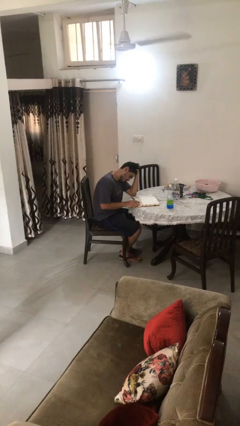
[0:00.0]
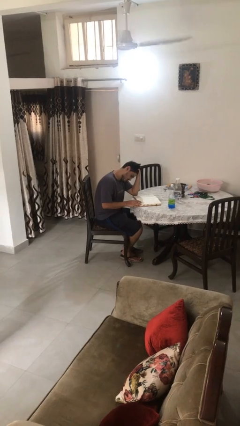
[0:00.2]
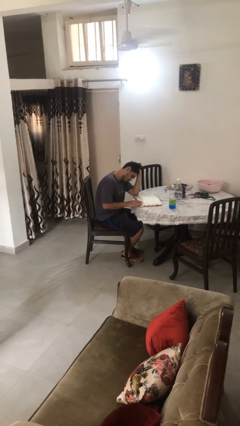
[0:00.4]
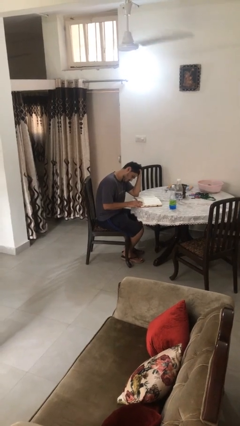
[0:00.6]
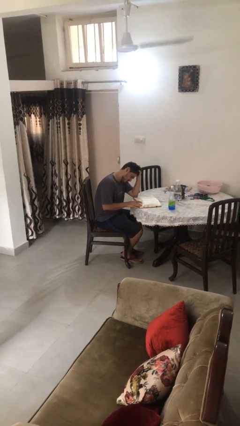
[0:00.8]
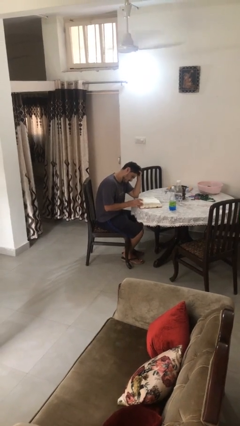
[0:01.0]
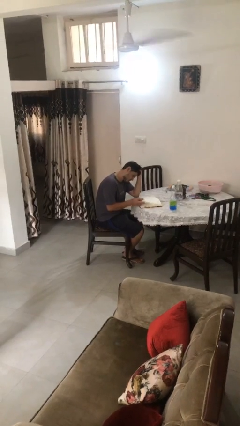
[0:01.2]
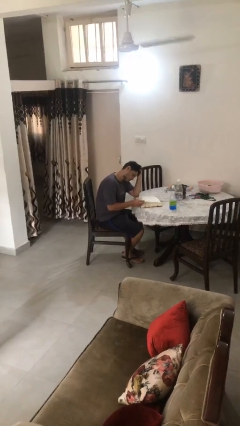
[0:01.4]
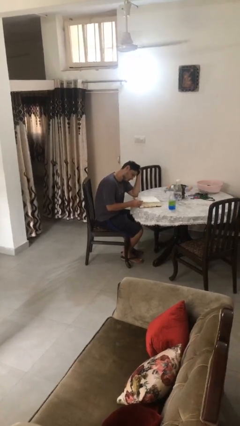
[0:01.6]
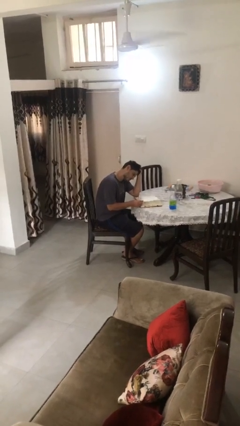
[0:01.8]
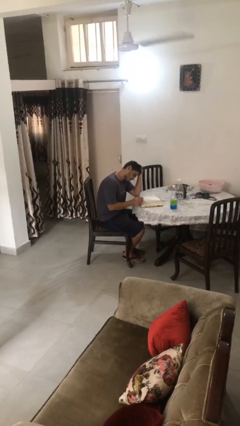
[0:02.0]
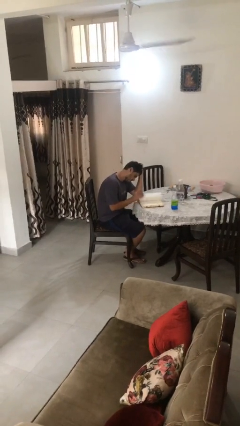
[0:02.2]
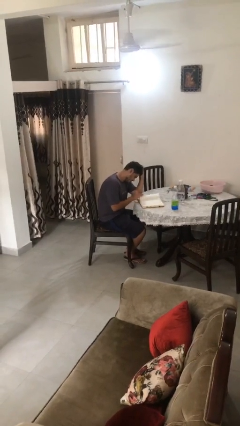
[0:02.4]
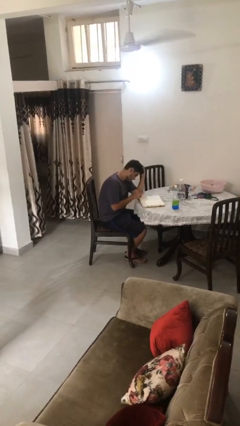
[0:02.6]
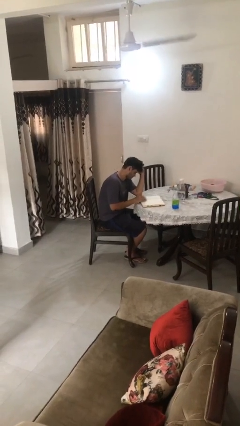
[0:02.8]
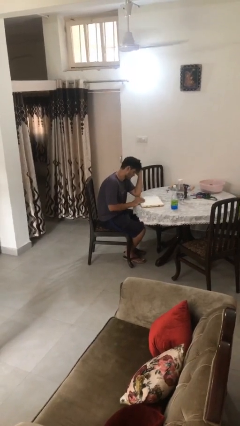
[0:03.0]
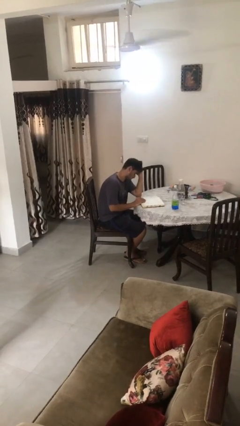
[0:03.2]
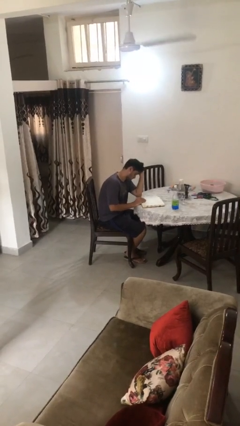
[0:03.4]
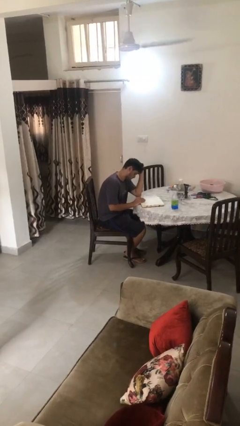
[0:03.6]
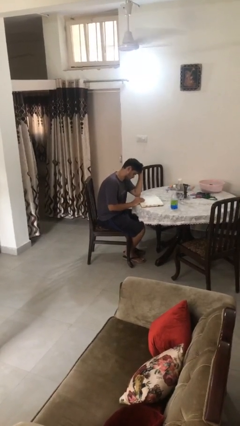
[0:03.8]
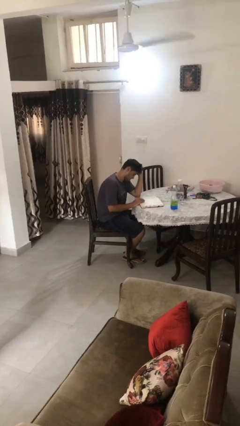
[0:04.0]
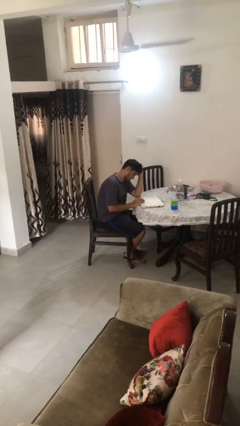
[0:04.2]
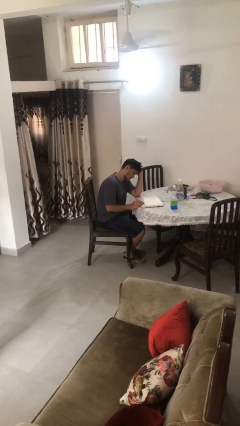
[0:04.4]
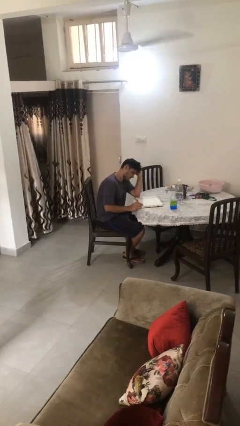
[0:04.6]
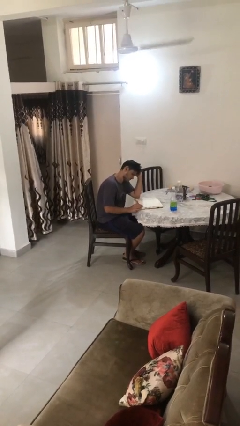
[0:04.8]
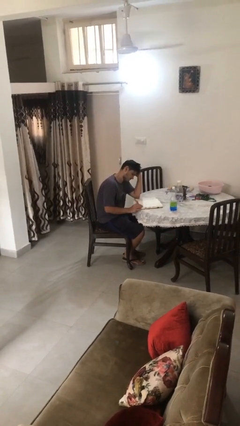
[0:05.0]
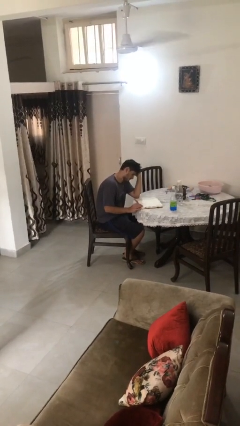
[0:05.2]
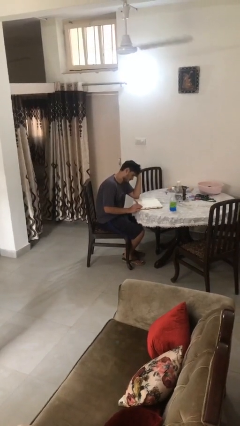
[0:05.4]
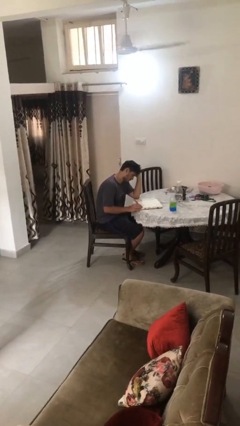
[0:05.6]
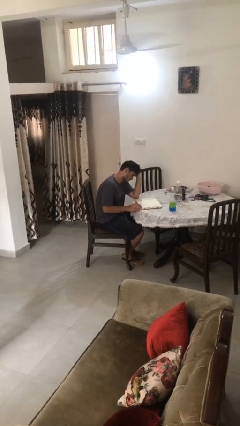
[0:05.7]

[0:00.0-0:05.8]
person reads document

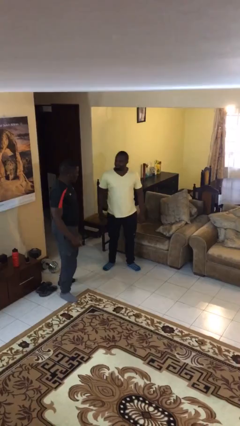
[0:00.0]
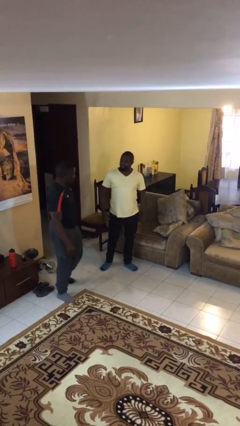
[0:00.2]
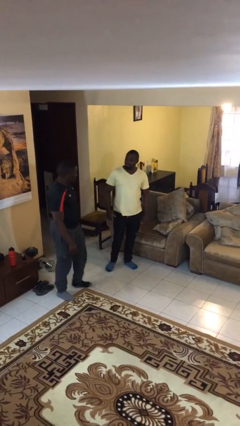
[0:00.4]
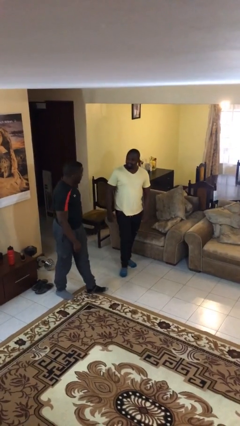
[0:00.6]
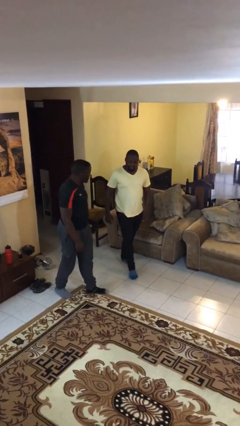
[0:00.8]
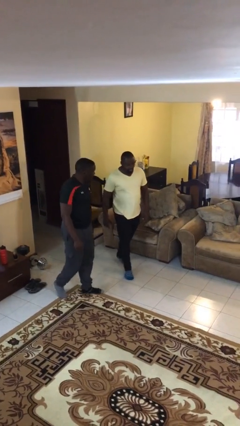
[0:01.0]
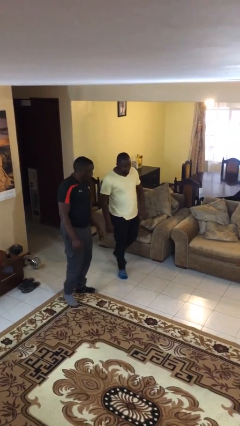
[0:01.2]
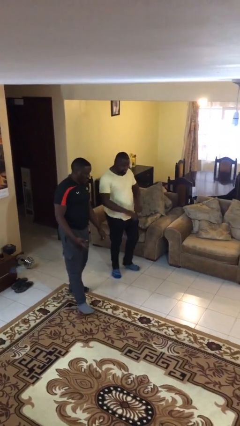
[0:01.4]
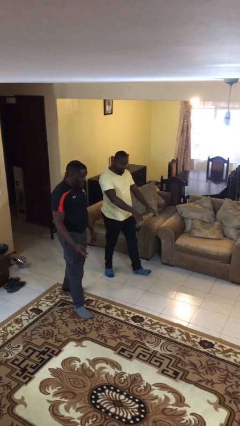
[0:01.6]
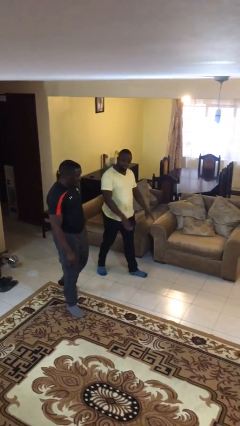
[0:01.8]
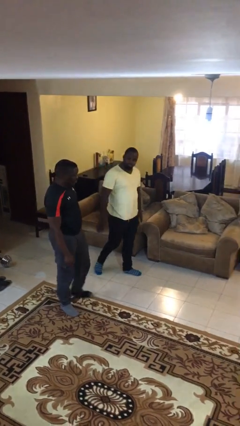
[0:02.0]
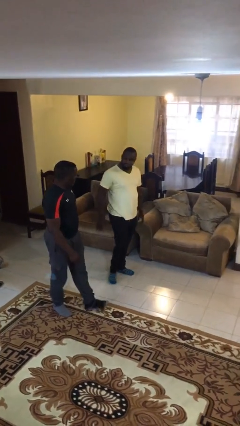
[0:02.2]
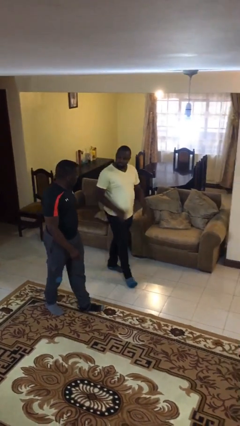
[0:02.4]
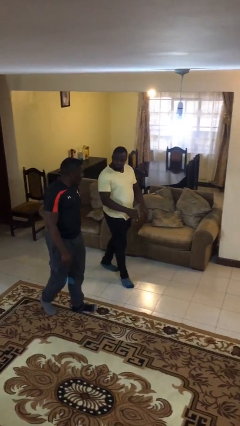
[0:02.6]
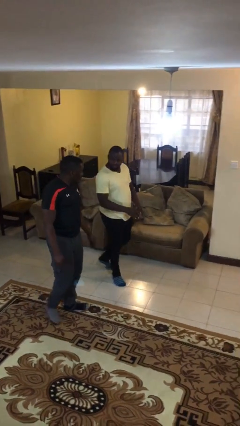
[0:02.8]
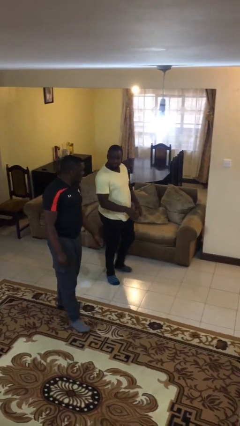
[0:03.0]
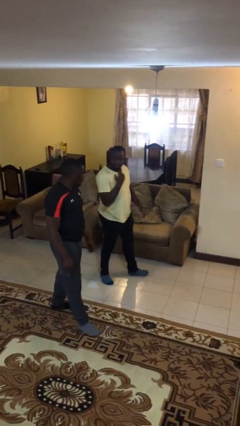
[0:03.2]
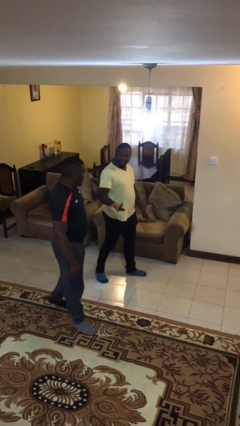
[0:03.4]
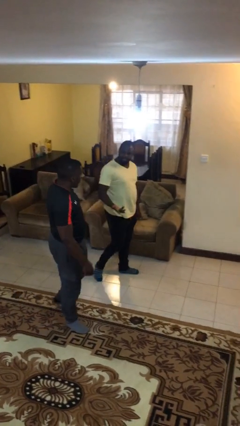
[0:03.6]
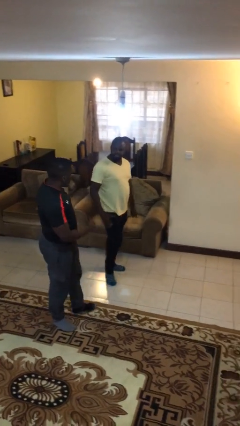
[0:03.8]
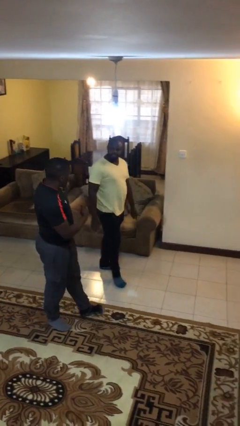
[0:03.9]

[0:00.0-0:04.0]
person talks to person

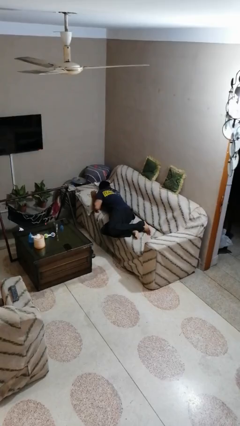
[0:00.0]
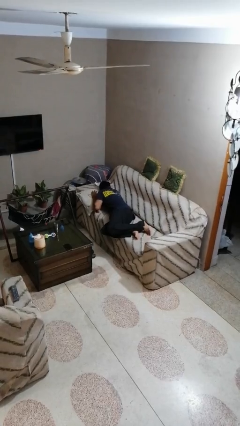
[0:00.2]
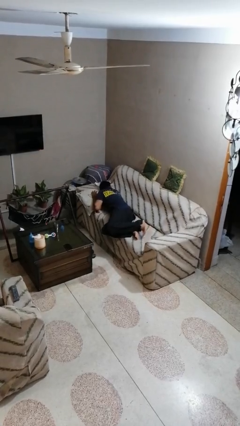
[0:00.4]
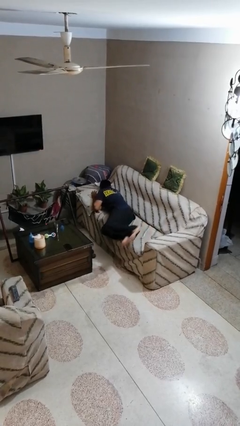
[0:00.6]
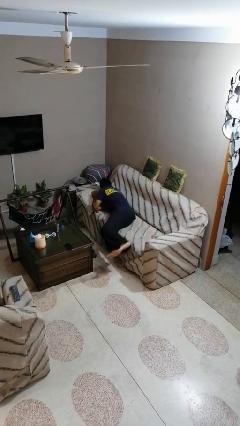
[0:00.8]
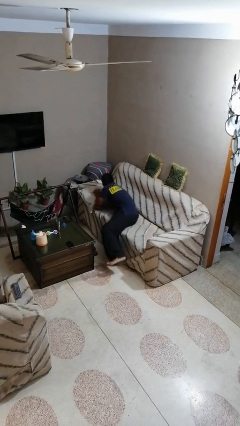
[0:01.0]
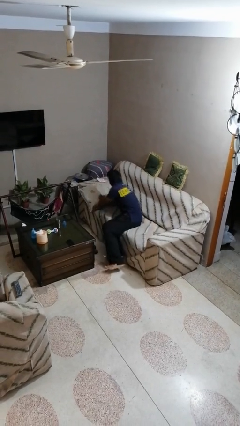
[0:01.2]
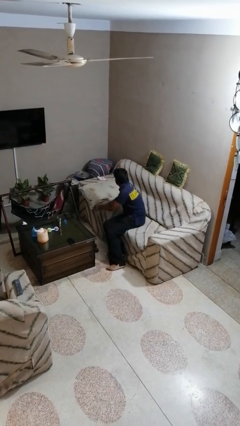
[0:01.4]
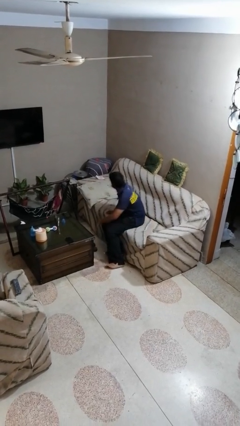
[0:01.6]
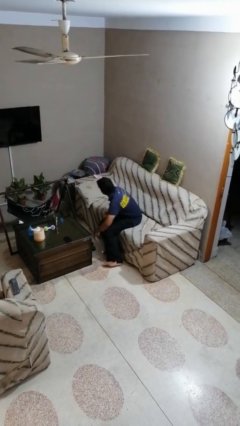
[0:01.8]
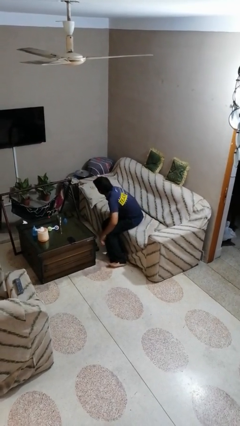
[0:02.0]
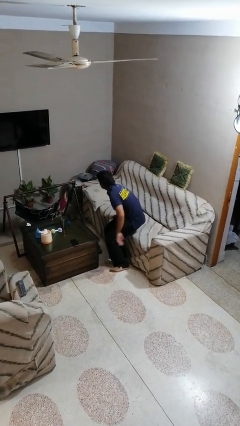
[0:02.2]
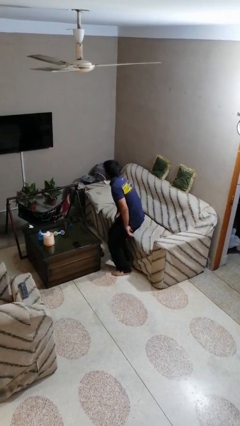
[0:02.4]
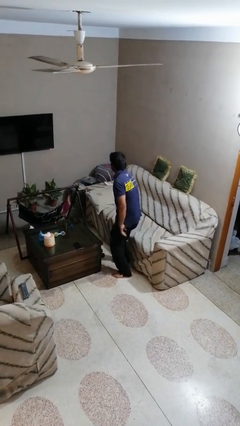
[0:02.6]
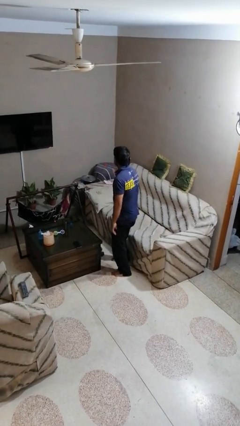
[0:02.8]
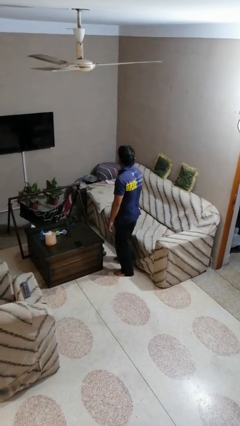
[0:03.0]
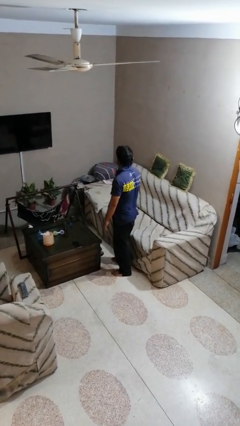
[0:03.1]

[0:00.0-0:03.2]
person stands up

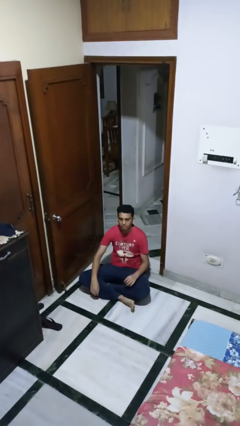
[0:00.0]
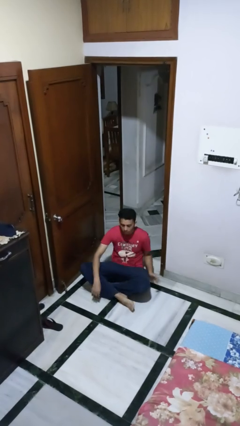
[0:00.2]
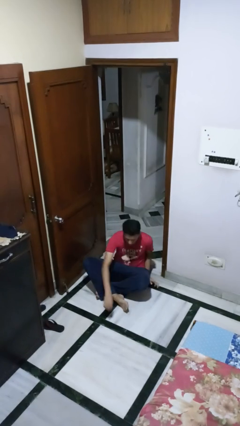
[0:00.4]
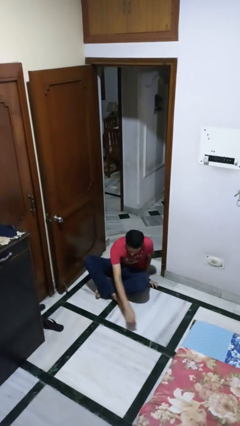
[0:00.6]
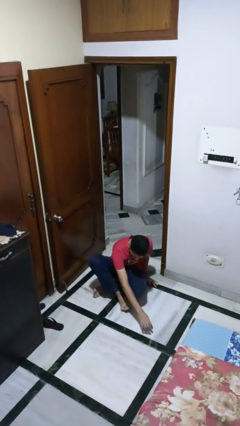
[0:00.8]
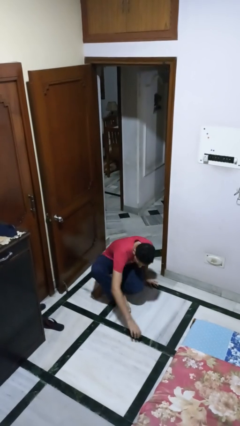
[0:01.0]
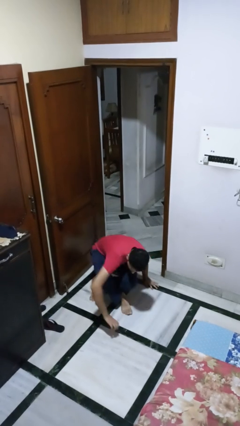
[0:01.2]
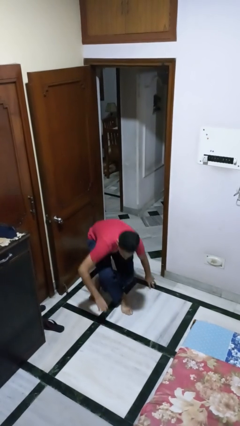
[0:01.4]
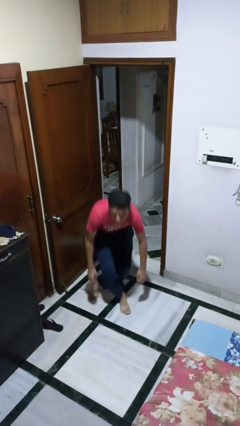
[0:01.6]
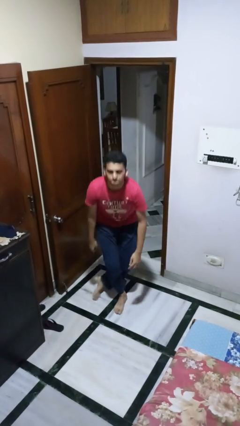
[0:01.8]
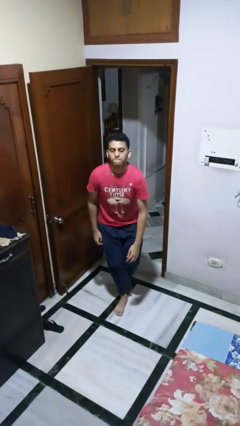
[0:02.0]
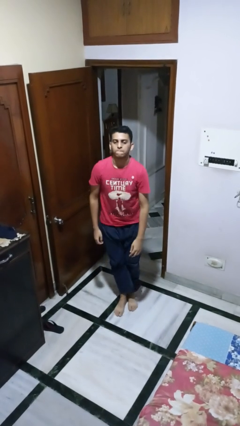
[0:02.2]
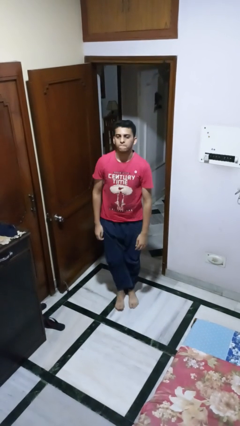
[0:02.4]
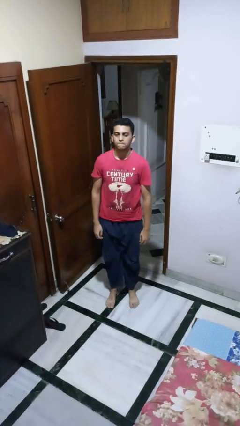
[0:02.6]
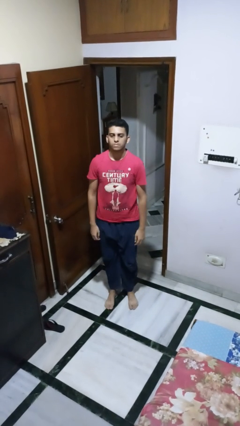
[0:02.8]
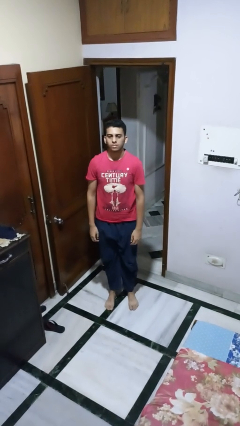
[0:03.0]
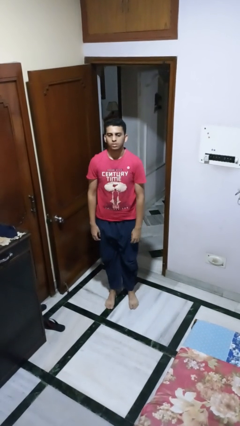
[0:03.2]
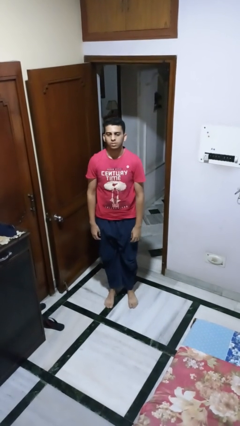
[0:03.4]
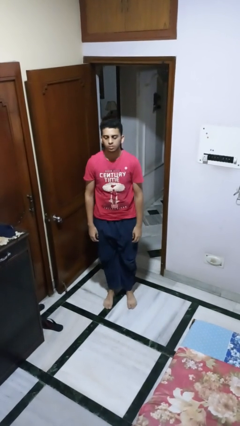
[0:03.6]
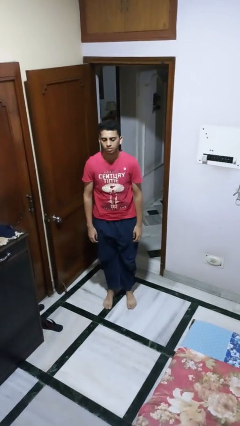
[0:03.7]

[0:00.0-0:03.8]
person stands up from floor

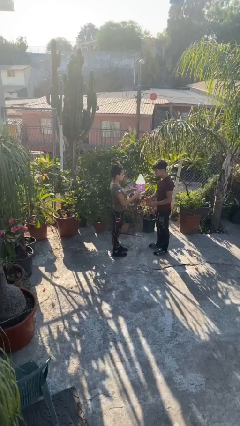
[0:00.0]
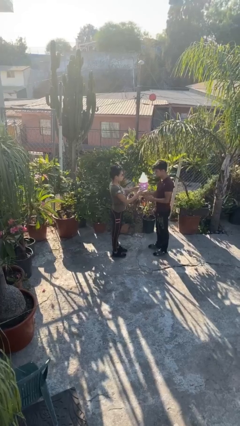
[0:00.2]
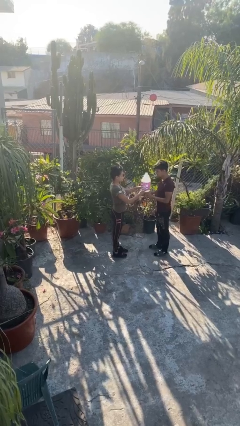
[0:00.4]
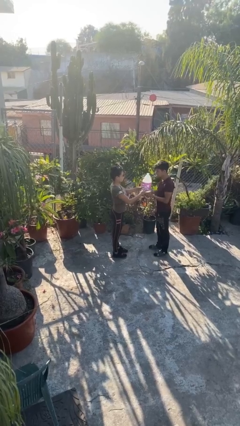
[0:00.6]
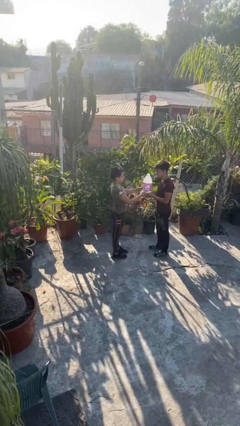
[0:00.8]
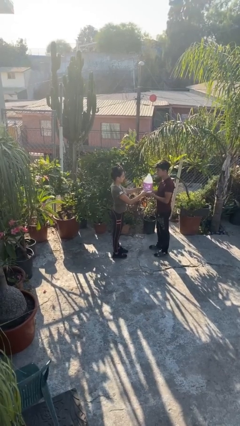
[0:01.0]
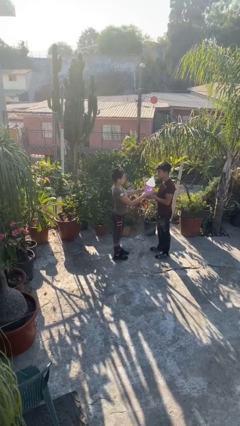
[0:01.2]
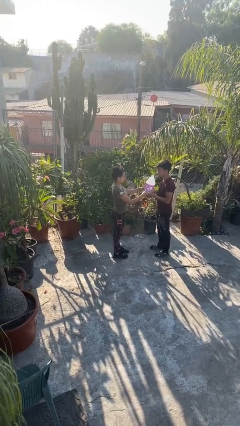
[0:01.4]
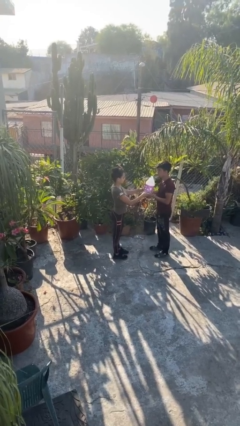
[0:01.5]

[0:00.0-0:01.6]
person transfers object to person
